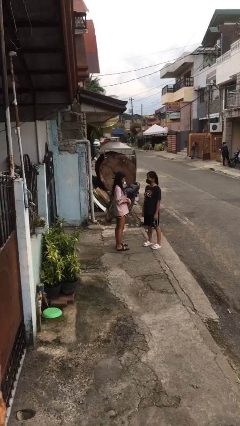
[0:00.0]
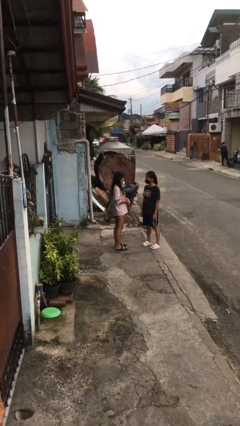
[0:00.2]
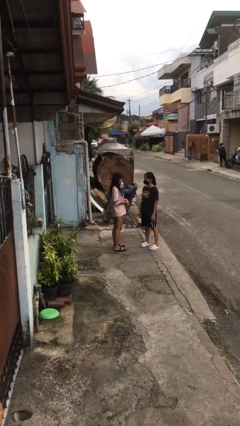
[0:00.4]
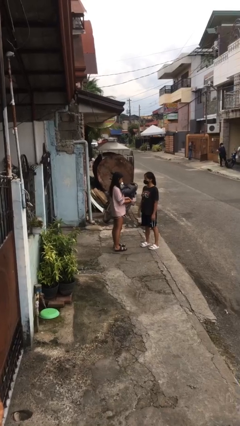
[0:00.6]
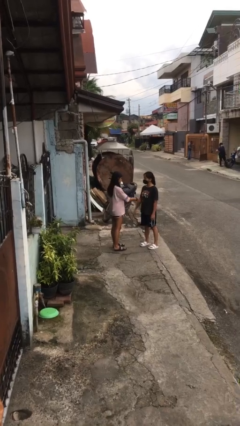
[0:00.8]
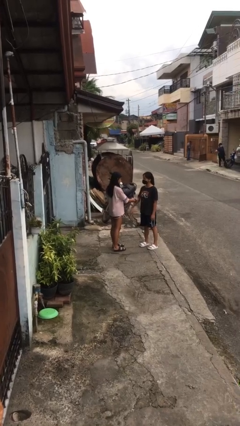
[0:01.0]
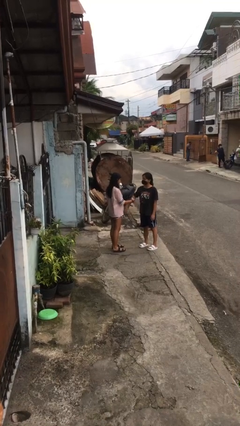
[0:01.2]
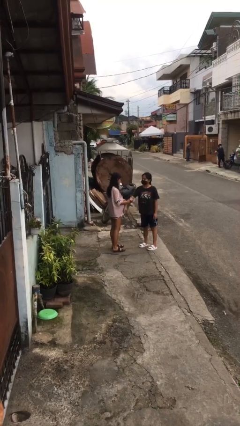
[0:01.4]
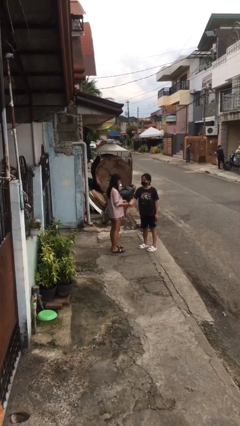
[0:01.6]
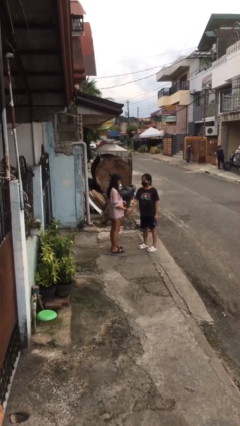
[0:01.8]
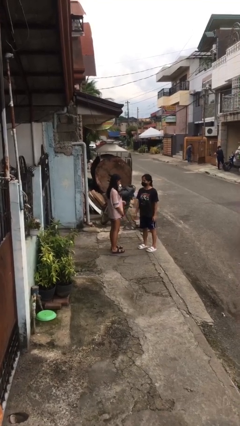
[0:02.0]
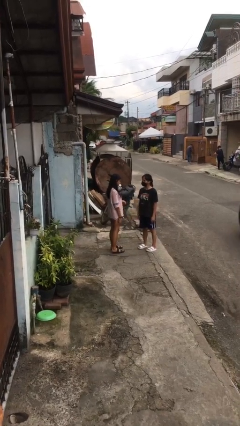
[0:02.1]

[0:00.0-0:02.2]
person grabs person by forearm

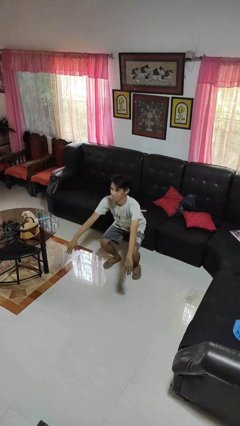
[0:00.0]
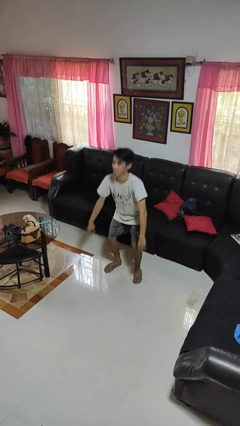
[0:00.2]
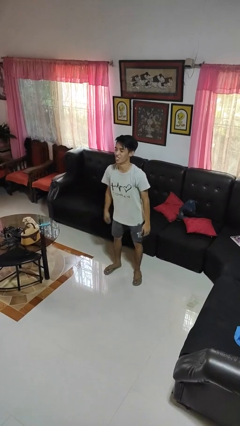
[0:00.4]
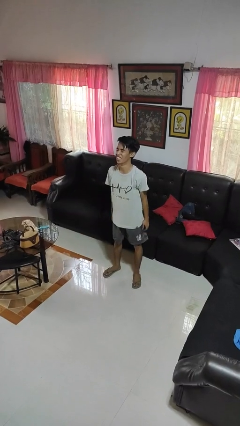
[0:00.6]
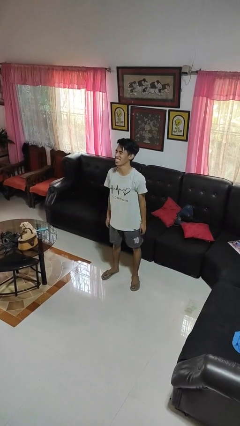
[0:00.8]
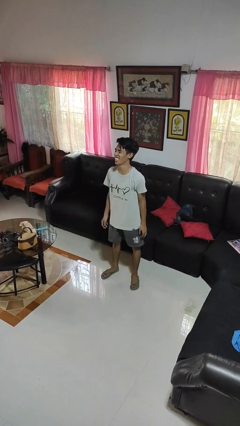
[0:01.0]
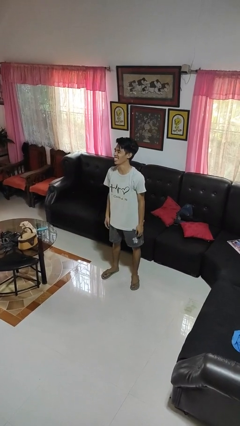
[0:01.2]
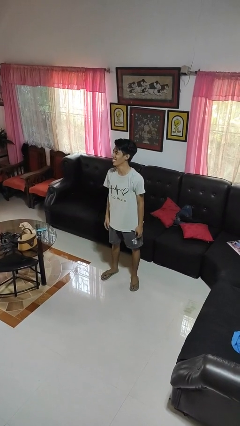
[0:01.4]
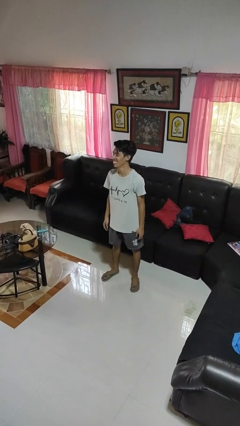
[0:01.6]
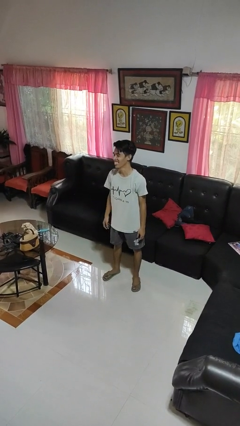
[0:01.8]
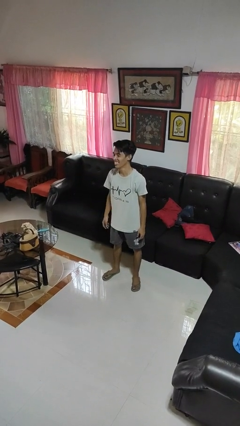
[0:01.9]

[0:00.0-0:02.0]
person stands up

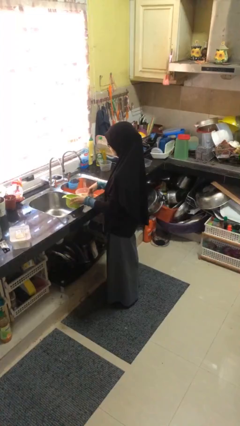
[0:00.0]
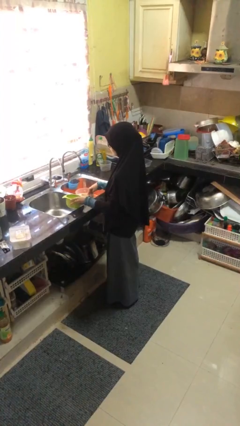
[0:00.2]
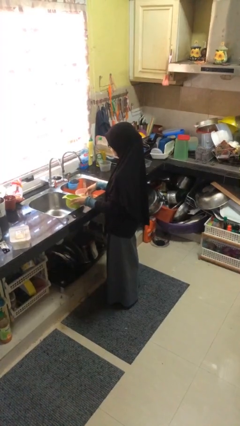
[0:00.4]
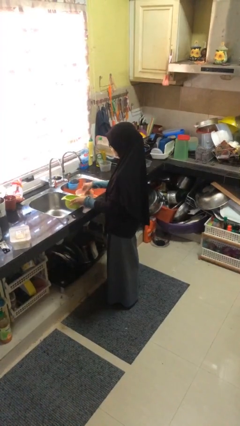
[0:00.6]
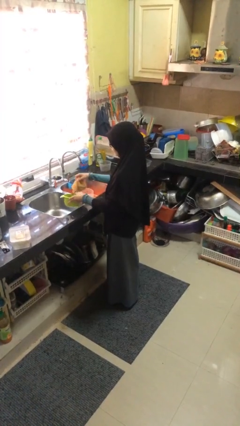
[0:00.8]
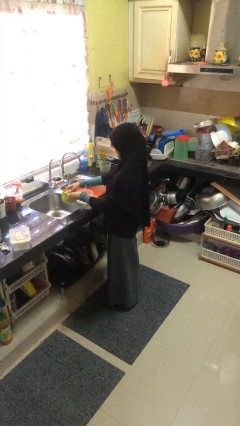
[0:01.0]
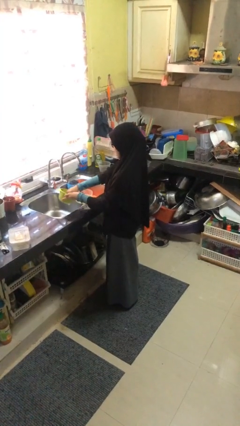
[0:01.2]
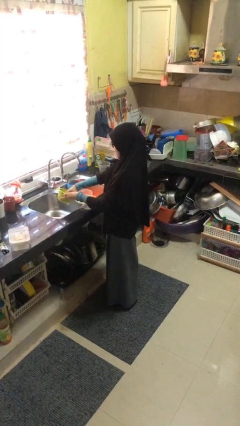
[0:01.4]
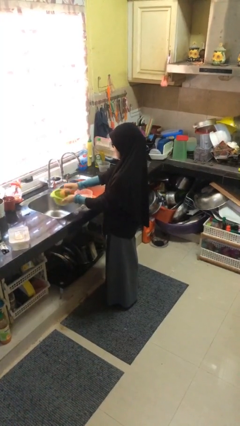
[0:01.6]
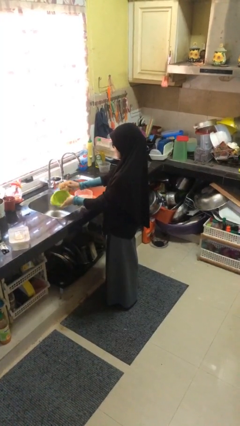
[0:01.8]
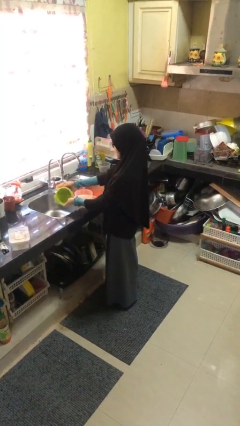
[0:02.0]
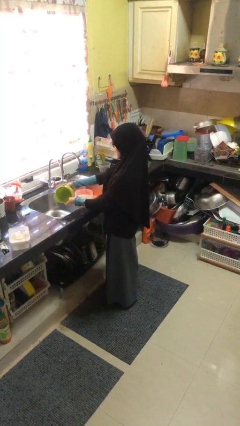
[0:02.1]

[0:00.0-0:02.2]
person washes dish

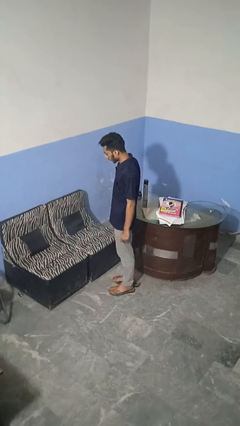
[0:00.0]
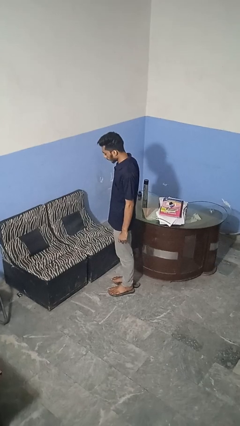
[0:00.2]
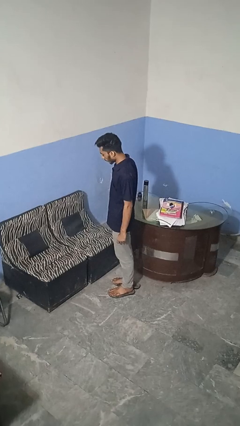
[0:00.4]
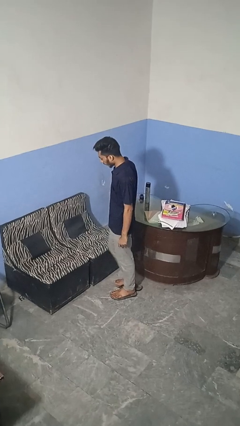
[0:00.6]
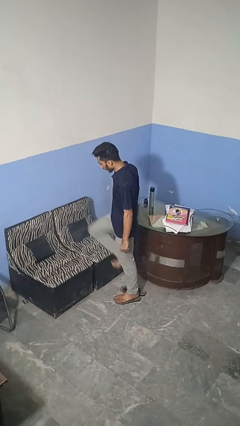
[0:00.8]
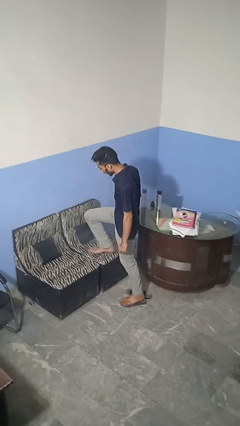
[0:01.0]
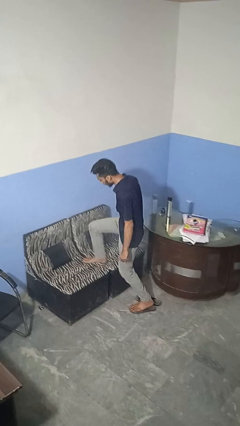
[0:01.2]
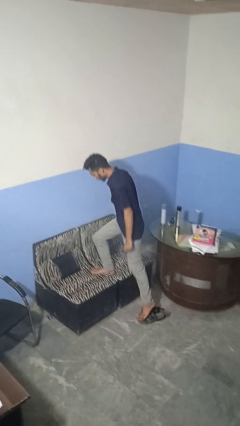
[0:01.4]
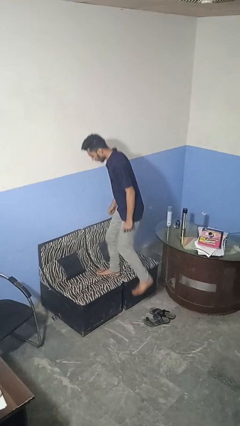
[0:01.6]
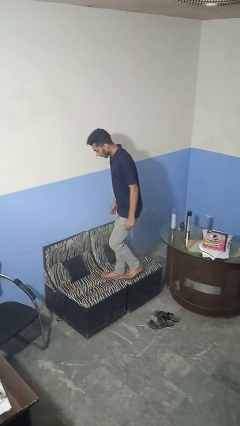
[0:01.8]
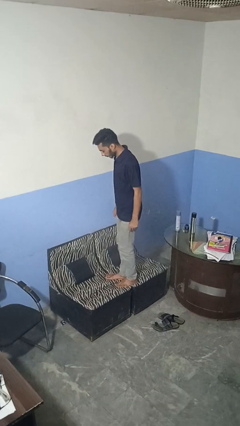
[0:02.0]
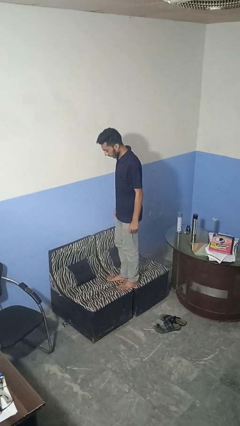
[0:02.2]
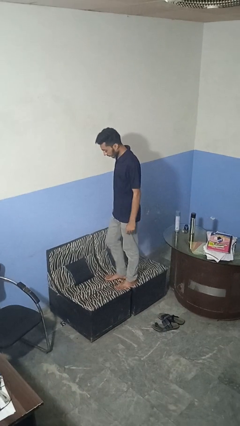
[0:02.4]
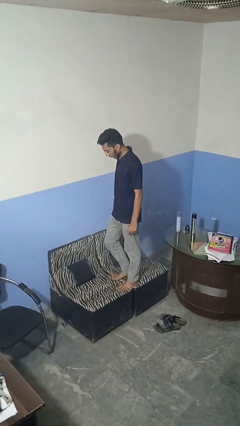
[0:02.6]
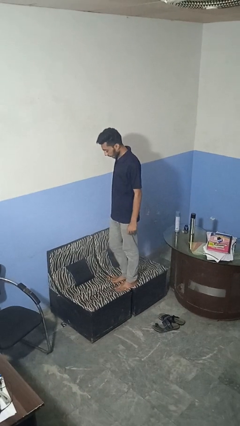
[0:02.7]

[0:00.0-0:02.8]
person climbs on couch

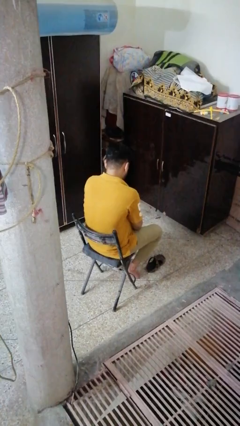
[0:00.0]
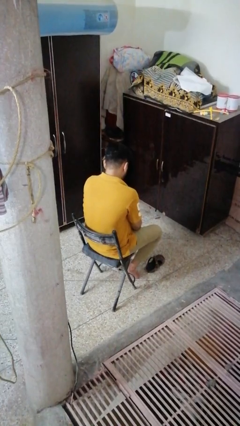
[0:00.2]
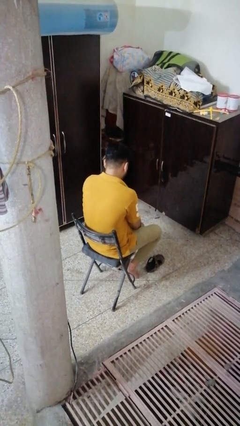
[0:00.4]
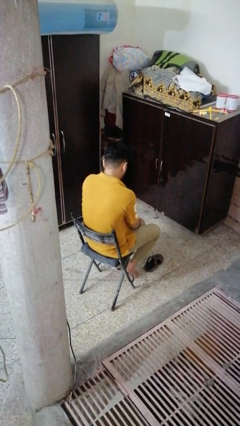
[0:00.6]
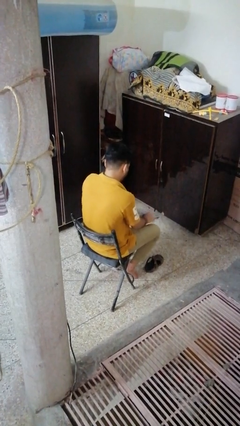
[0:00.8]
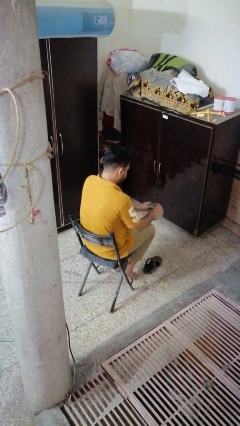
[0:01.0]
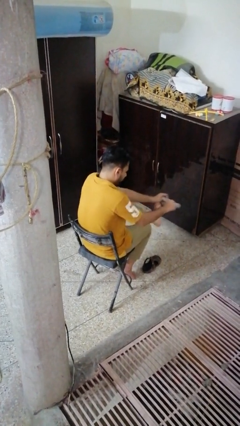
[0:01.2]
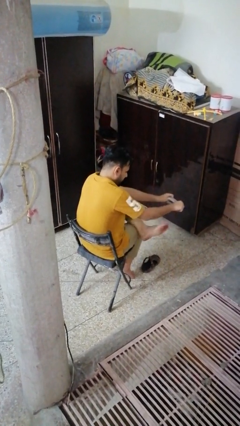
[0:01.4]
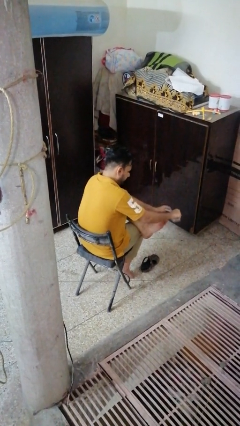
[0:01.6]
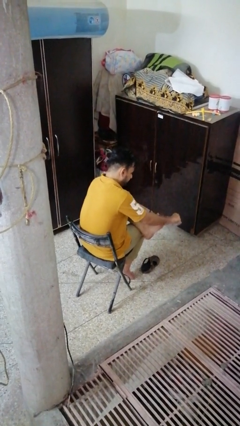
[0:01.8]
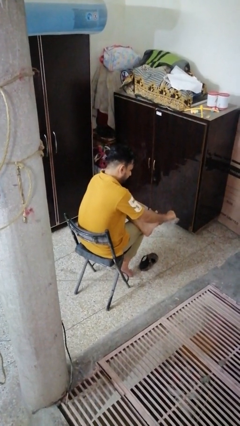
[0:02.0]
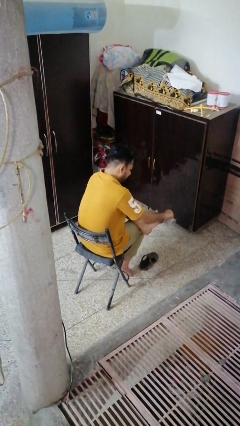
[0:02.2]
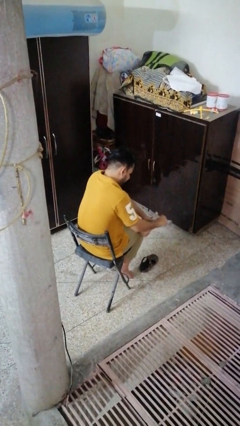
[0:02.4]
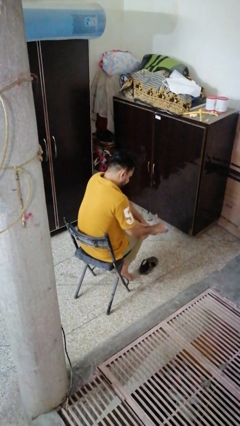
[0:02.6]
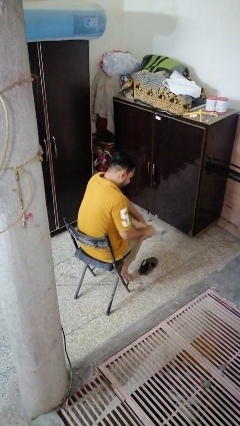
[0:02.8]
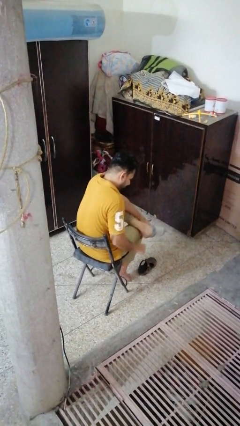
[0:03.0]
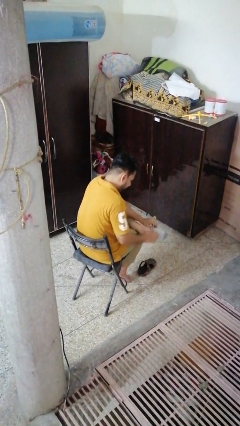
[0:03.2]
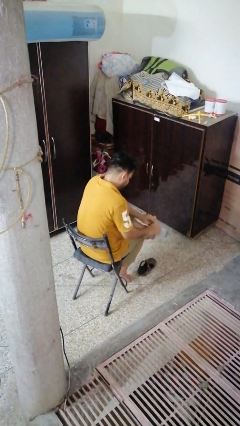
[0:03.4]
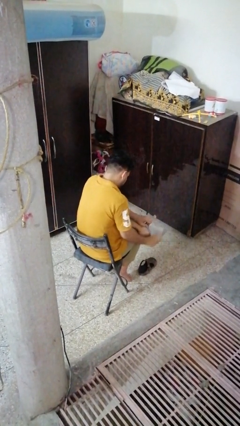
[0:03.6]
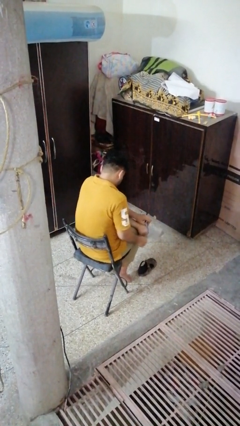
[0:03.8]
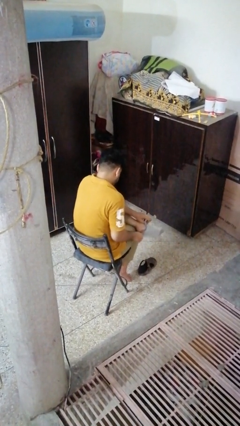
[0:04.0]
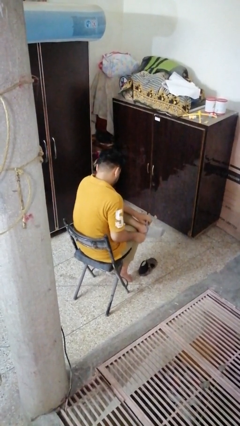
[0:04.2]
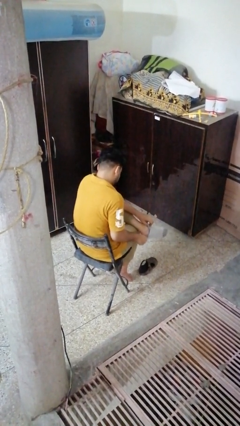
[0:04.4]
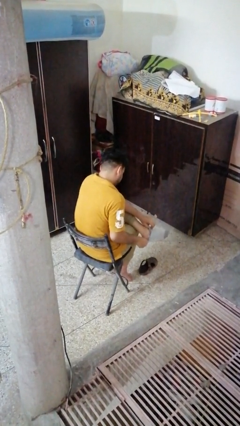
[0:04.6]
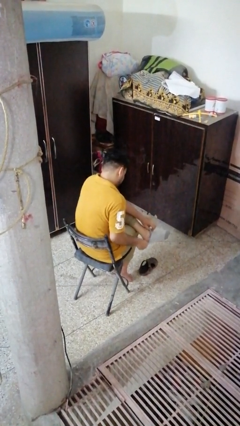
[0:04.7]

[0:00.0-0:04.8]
person puts on socks

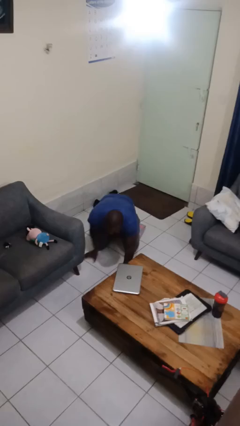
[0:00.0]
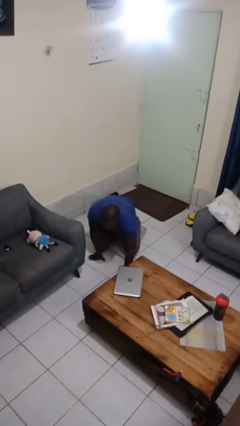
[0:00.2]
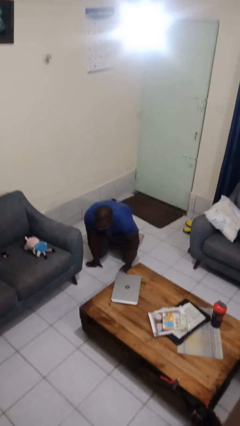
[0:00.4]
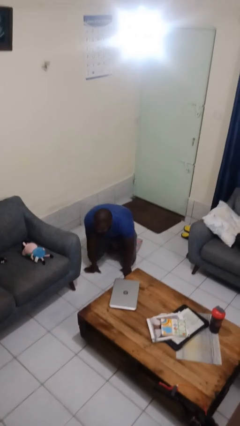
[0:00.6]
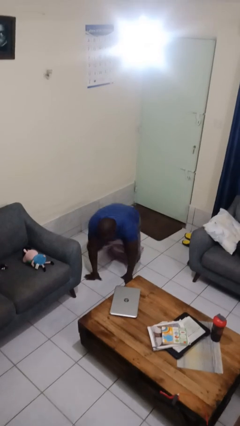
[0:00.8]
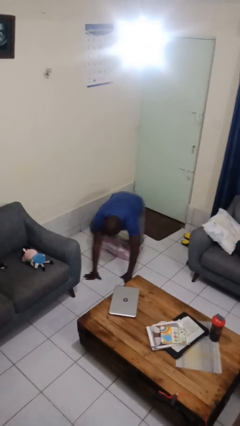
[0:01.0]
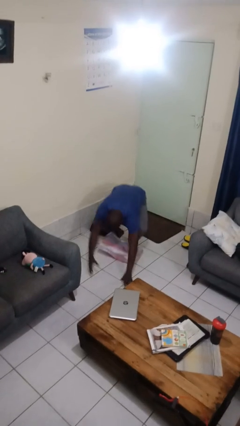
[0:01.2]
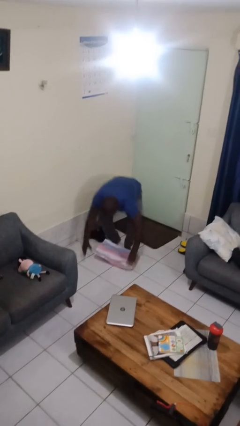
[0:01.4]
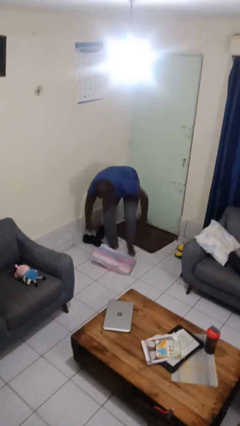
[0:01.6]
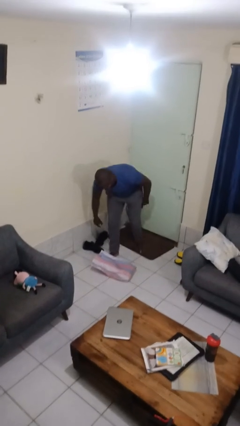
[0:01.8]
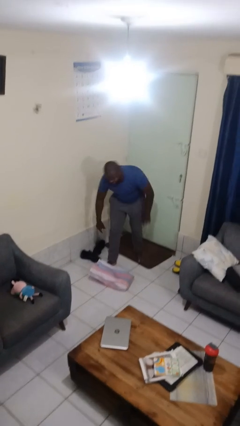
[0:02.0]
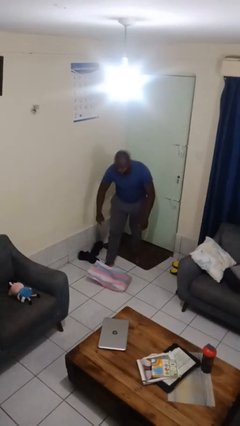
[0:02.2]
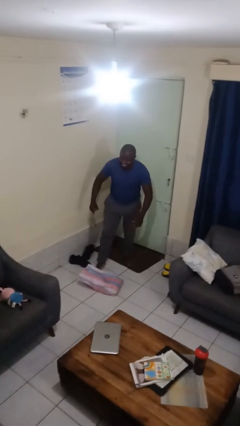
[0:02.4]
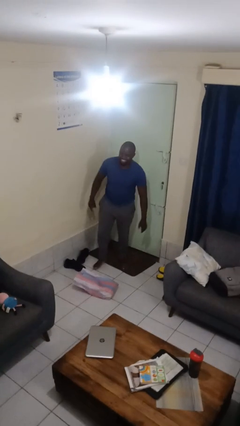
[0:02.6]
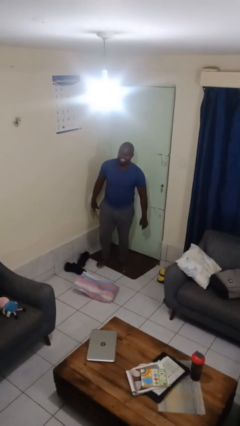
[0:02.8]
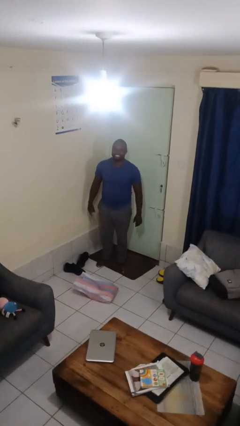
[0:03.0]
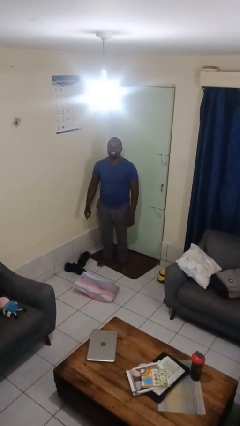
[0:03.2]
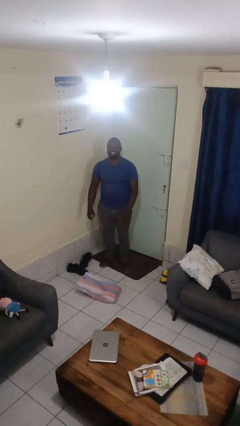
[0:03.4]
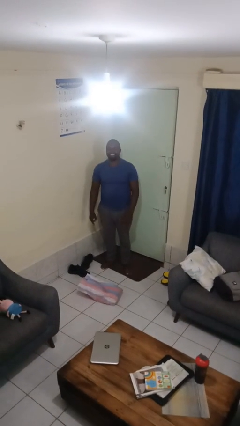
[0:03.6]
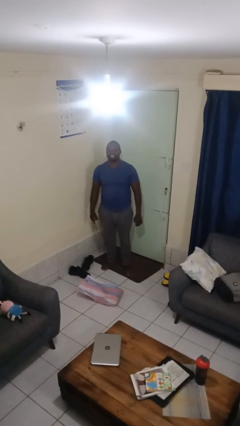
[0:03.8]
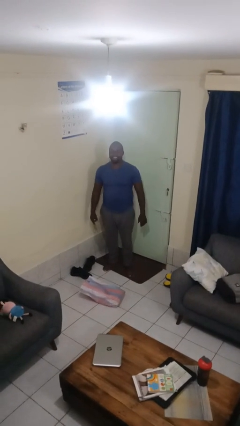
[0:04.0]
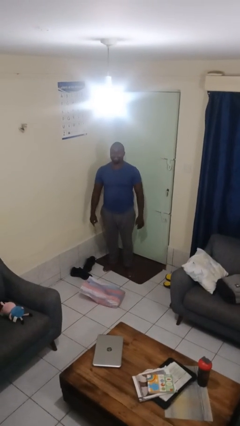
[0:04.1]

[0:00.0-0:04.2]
person stands up from floor
